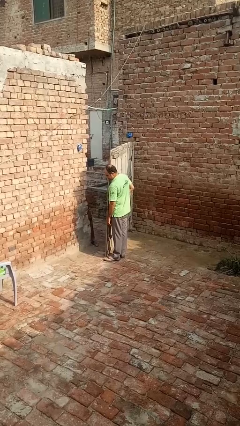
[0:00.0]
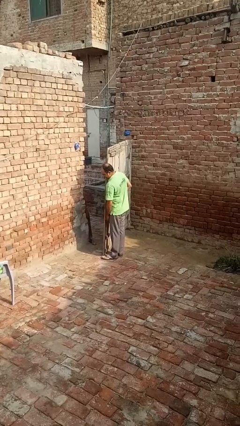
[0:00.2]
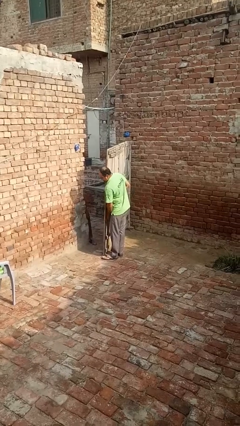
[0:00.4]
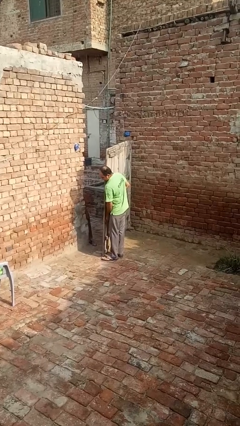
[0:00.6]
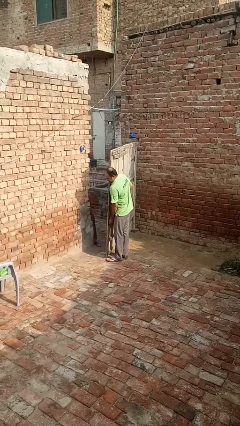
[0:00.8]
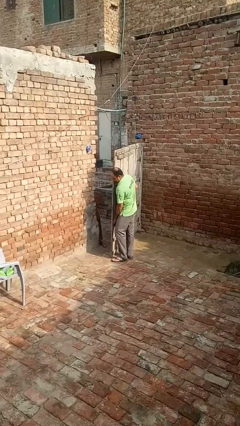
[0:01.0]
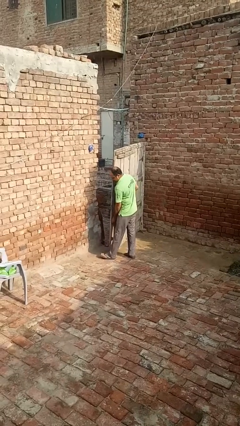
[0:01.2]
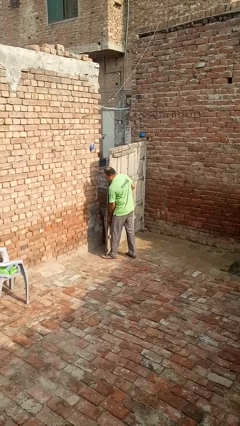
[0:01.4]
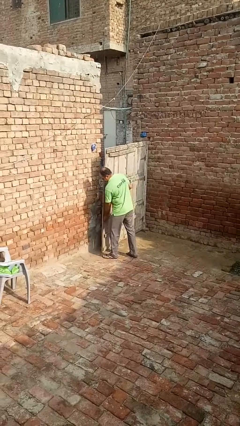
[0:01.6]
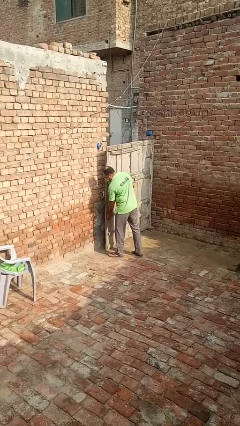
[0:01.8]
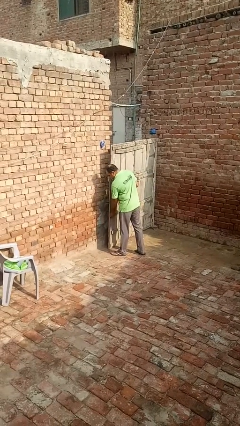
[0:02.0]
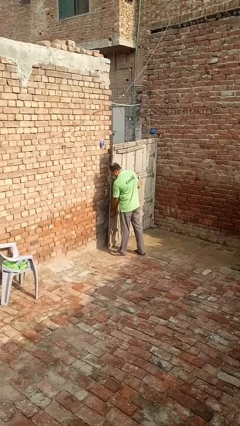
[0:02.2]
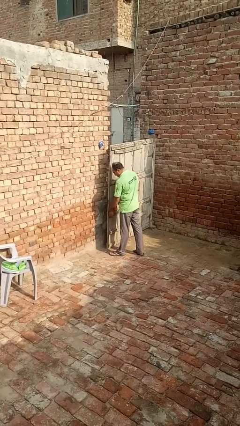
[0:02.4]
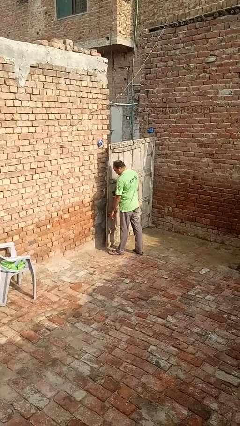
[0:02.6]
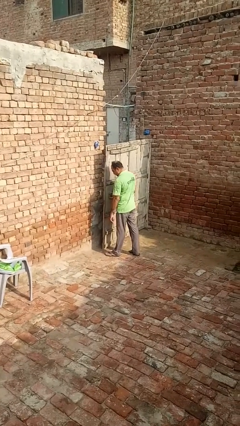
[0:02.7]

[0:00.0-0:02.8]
person closes gate

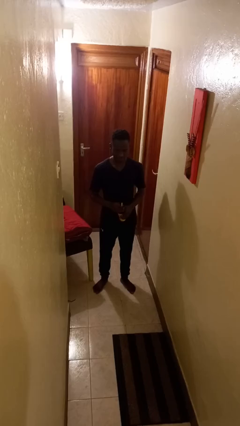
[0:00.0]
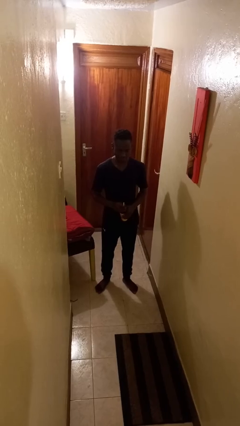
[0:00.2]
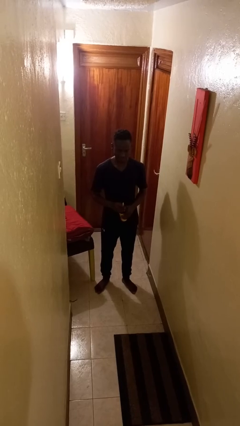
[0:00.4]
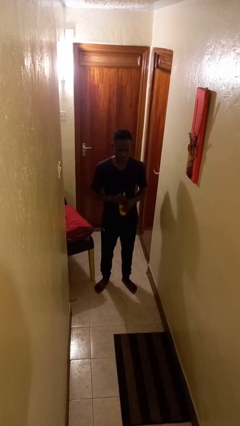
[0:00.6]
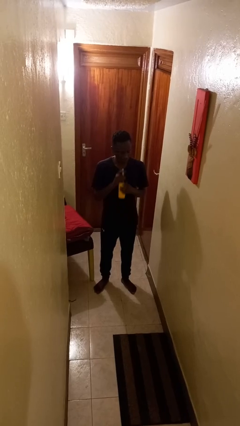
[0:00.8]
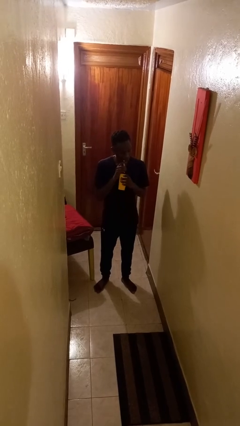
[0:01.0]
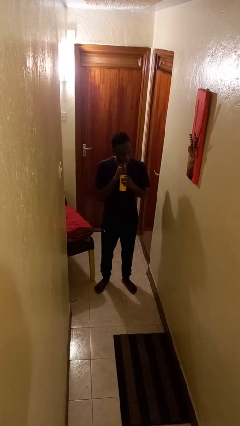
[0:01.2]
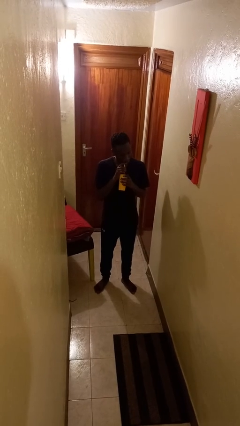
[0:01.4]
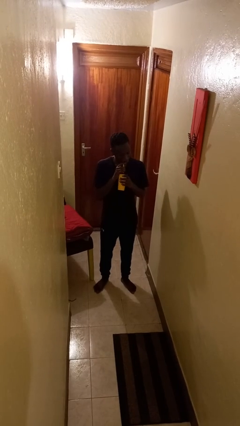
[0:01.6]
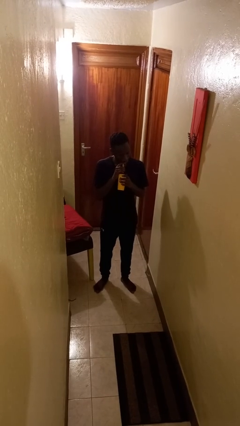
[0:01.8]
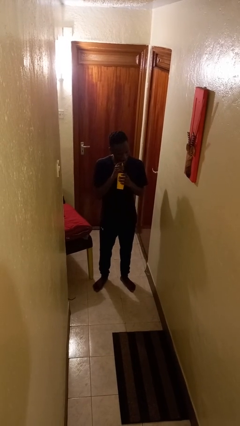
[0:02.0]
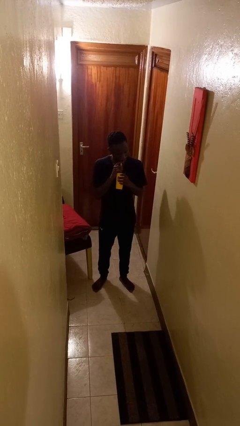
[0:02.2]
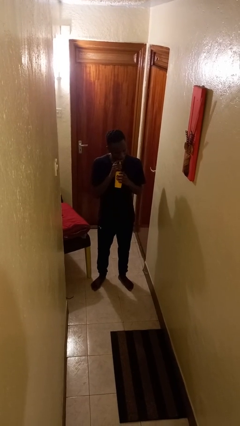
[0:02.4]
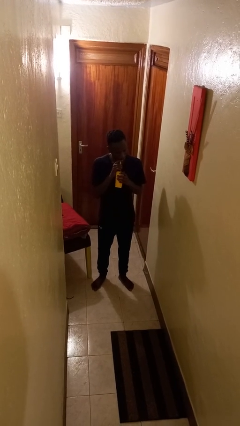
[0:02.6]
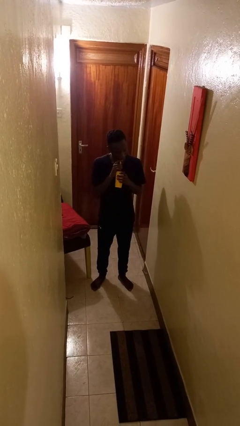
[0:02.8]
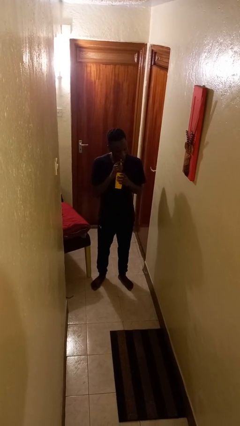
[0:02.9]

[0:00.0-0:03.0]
person drinks from straw

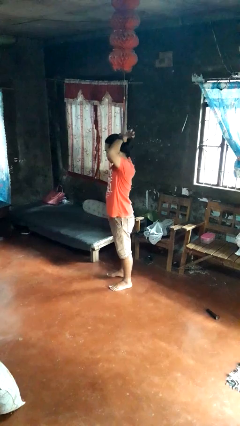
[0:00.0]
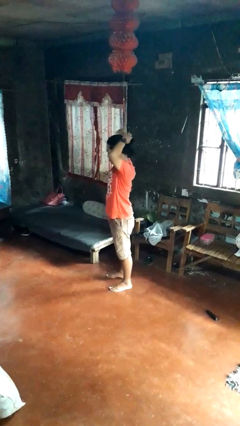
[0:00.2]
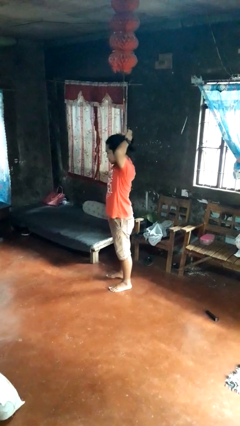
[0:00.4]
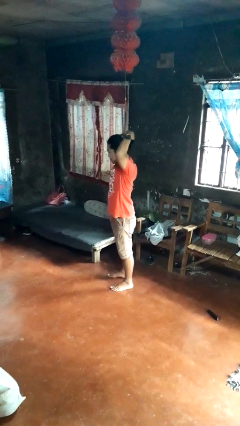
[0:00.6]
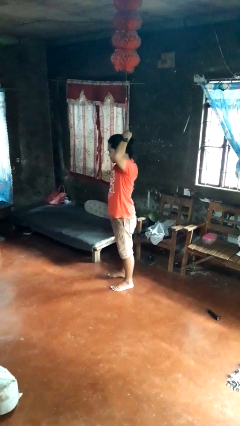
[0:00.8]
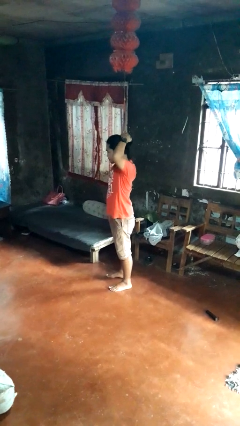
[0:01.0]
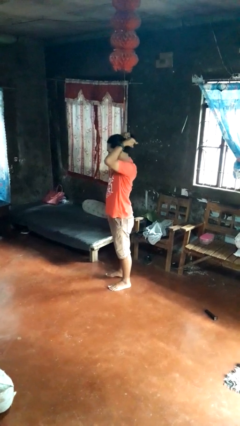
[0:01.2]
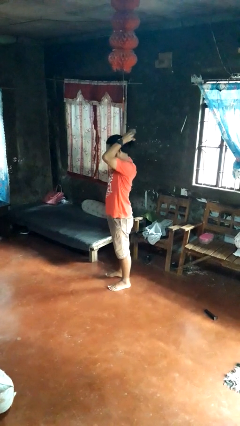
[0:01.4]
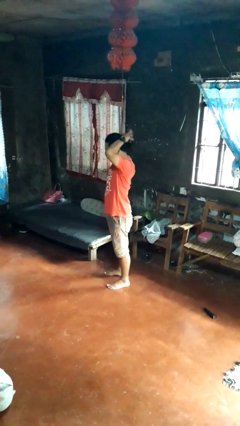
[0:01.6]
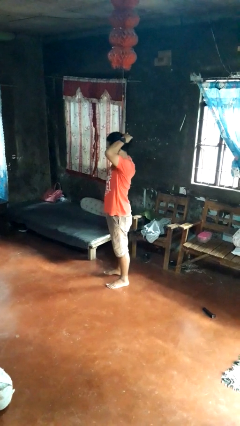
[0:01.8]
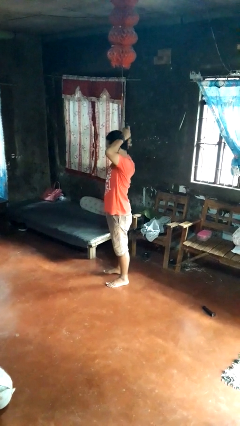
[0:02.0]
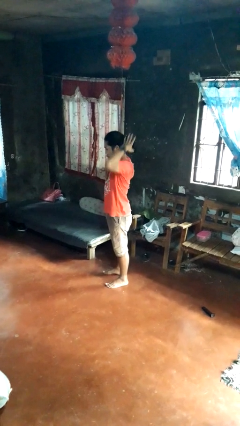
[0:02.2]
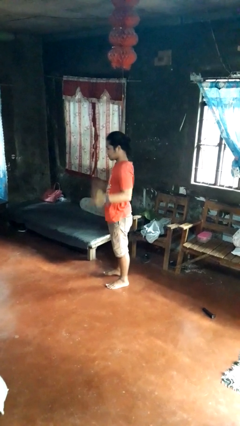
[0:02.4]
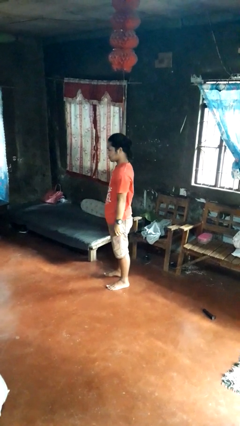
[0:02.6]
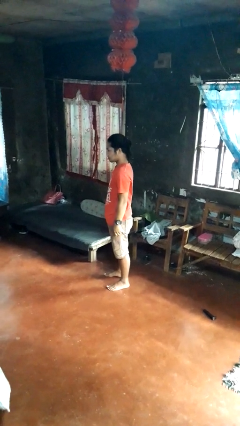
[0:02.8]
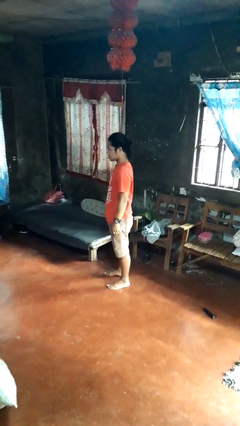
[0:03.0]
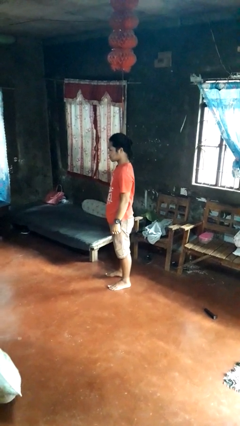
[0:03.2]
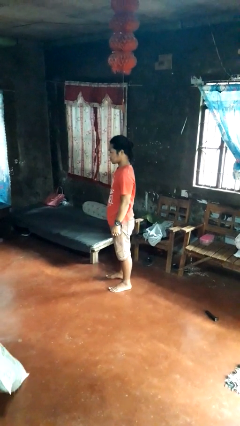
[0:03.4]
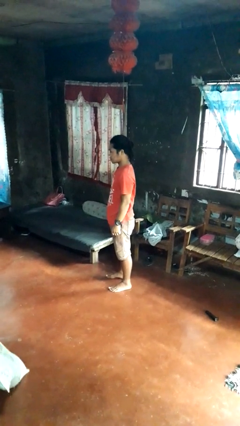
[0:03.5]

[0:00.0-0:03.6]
person puts hair in ponytail

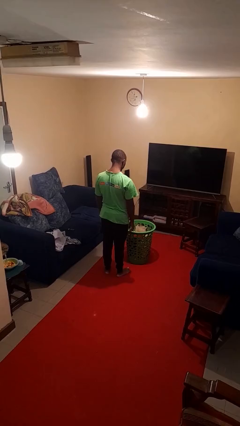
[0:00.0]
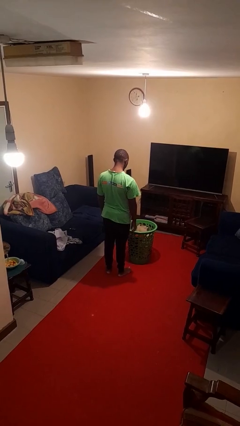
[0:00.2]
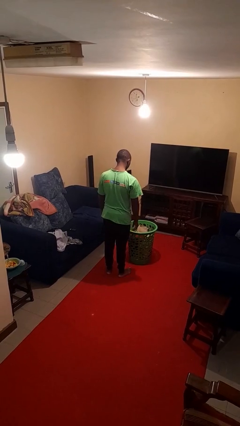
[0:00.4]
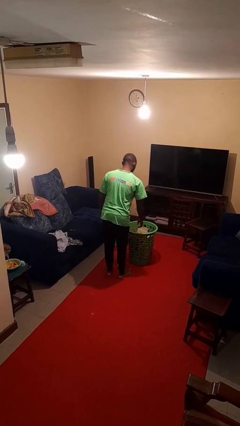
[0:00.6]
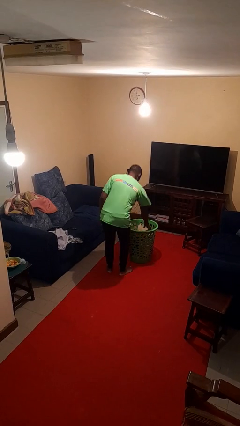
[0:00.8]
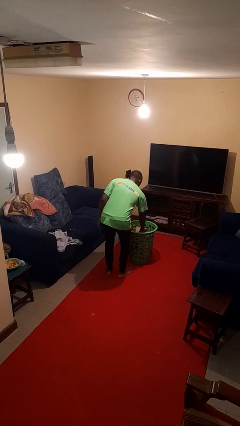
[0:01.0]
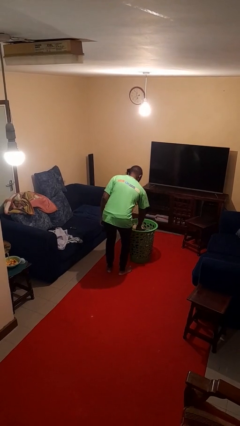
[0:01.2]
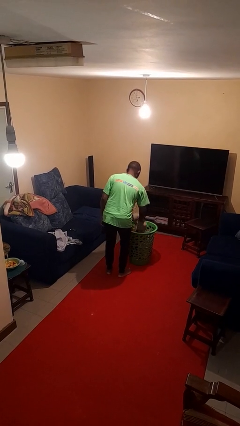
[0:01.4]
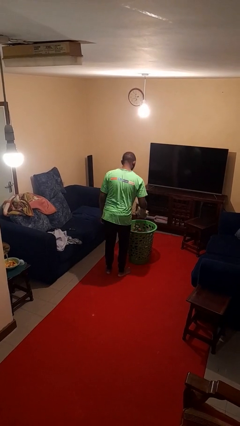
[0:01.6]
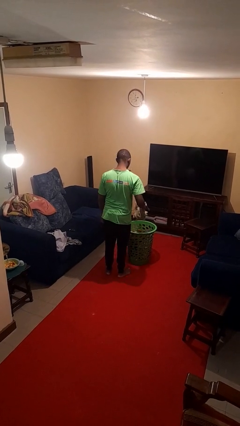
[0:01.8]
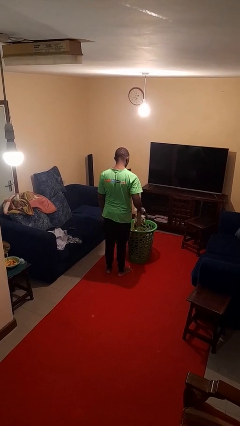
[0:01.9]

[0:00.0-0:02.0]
person takes object from basket

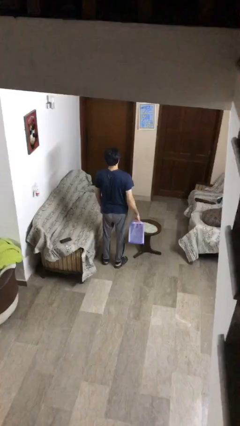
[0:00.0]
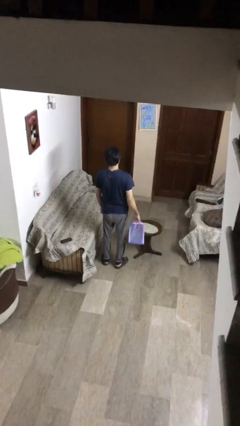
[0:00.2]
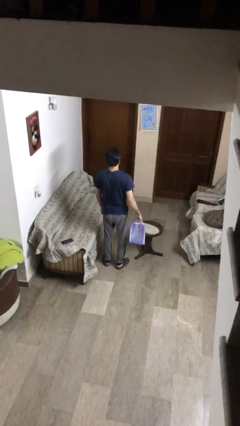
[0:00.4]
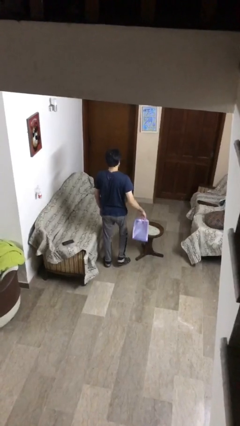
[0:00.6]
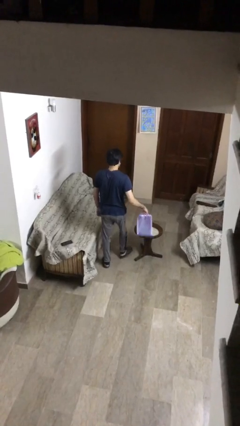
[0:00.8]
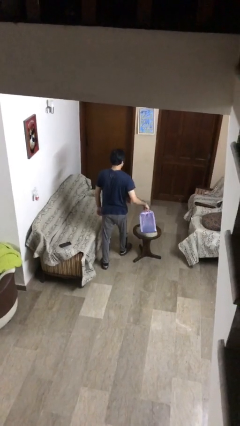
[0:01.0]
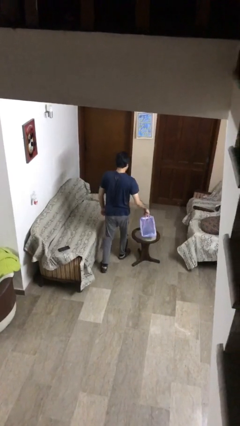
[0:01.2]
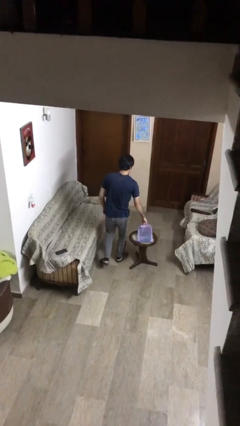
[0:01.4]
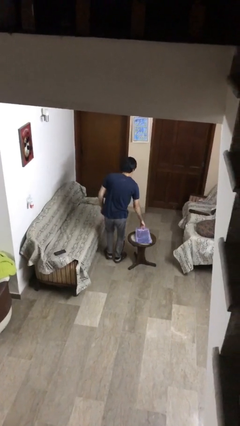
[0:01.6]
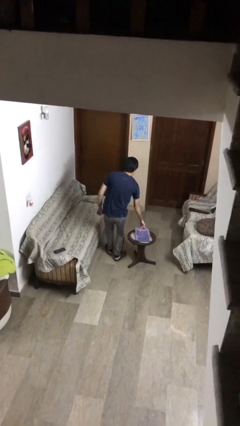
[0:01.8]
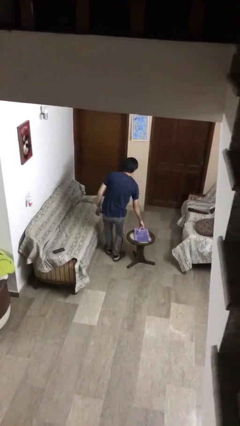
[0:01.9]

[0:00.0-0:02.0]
person puts down object on table

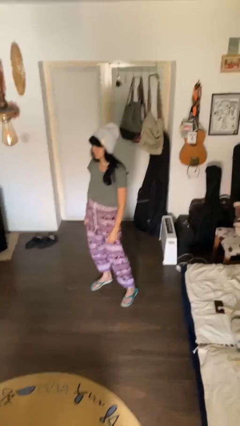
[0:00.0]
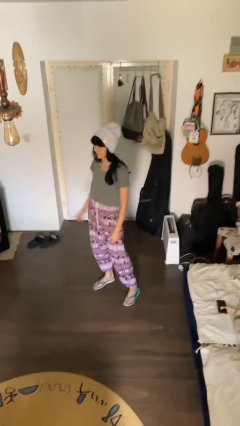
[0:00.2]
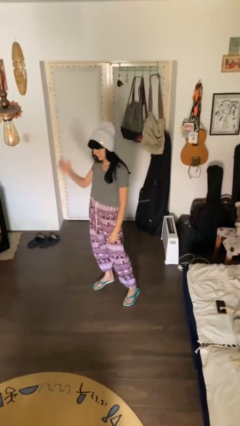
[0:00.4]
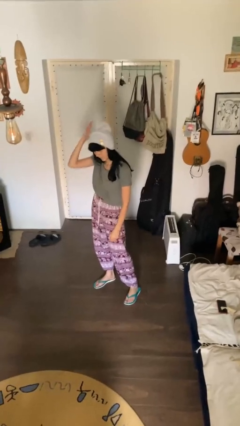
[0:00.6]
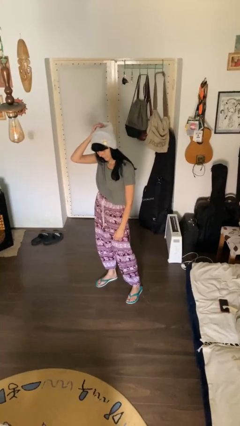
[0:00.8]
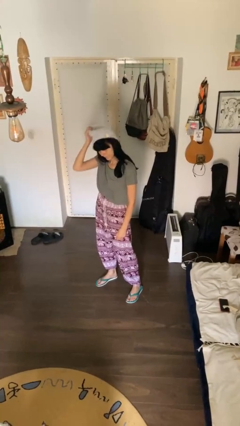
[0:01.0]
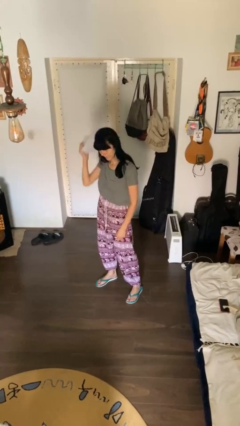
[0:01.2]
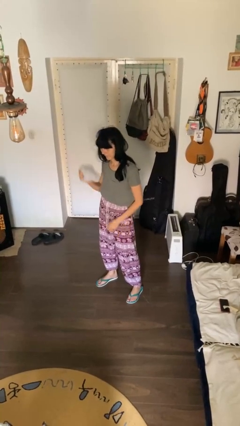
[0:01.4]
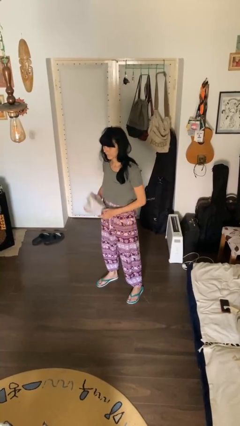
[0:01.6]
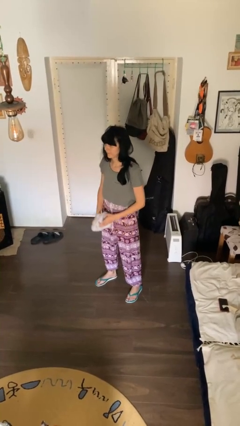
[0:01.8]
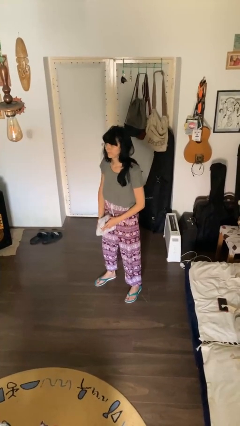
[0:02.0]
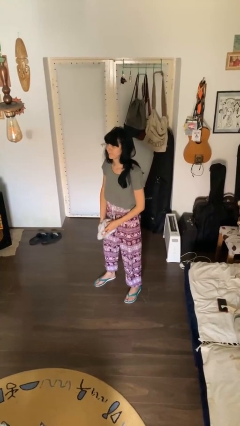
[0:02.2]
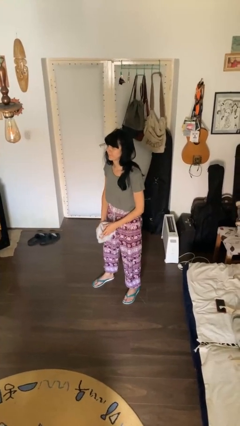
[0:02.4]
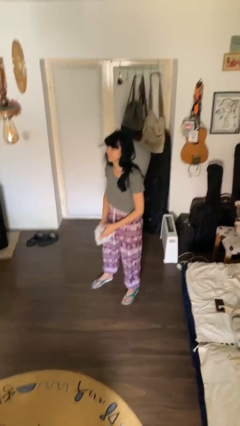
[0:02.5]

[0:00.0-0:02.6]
person takes off hat

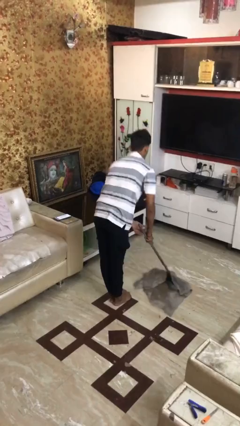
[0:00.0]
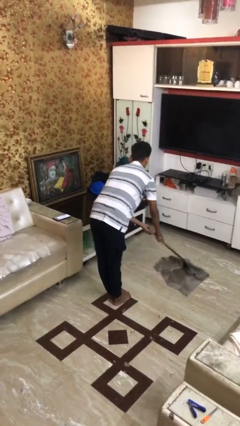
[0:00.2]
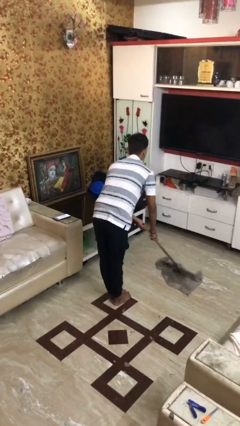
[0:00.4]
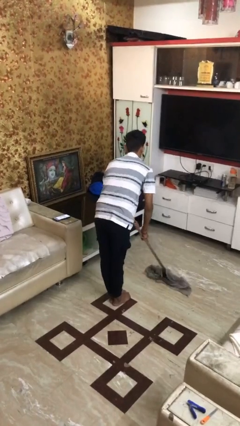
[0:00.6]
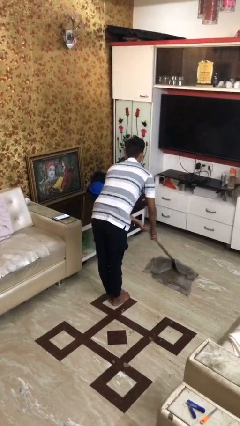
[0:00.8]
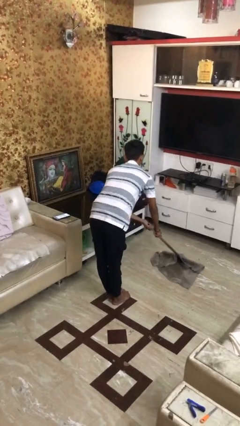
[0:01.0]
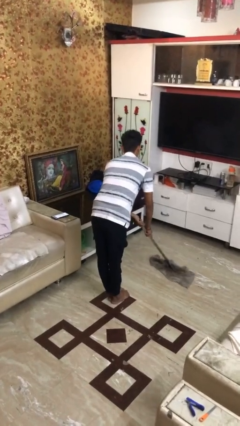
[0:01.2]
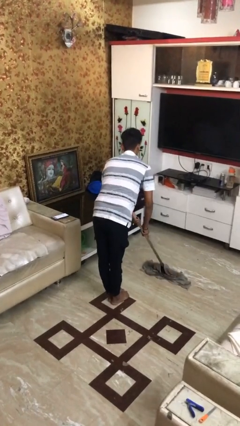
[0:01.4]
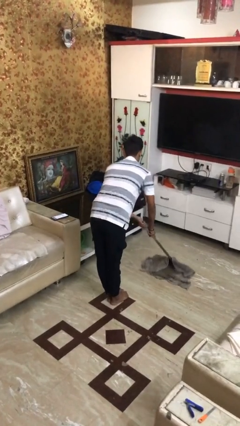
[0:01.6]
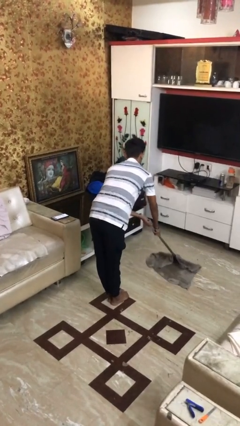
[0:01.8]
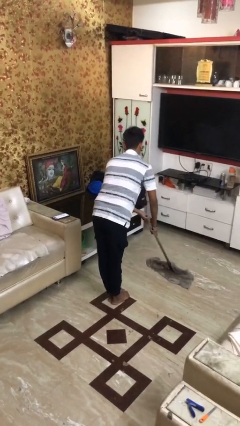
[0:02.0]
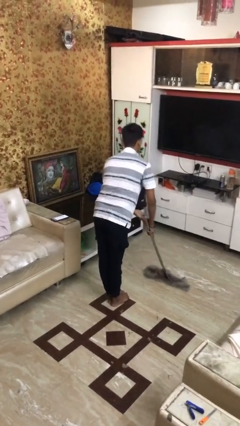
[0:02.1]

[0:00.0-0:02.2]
person mops
